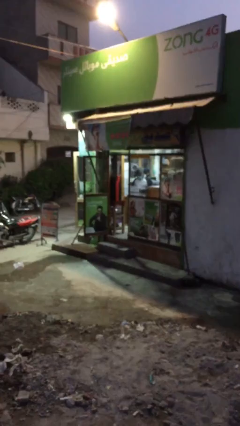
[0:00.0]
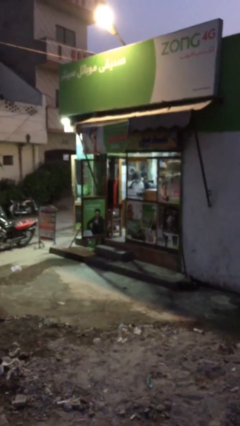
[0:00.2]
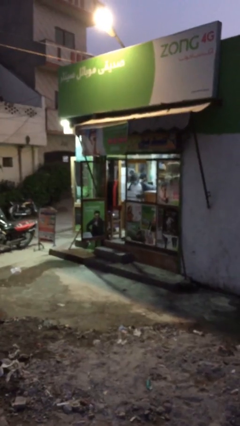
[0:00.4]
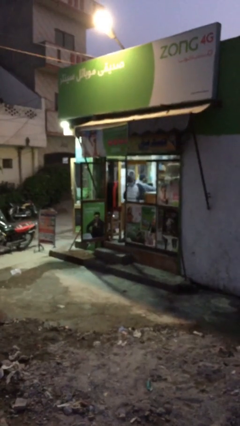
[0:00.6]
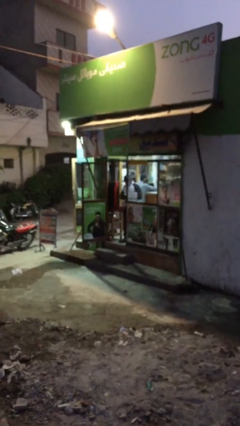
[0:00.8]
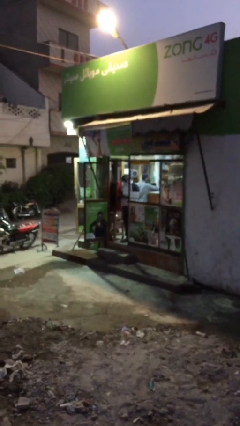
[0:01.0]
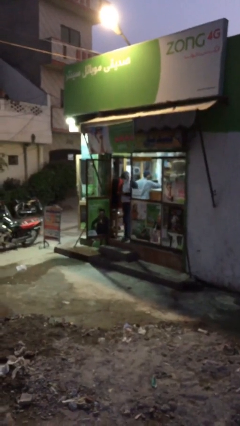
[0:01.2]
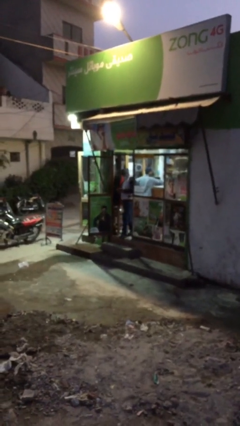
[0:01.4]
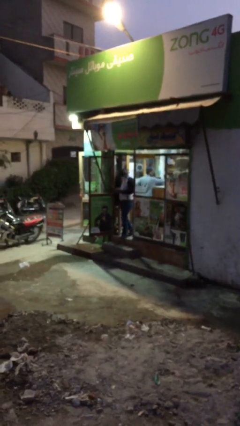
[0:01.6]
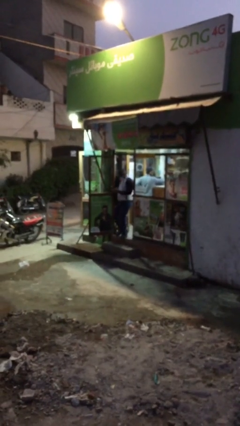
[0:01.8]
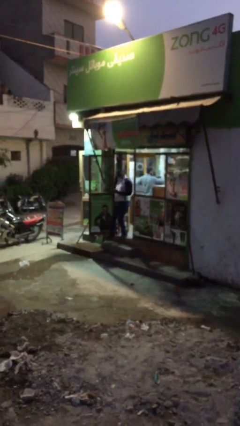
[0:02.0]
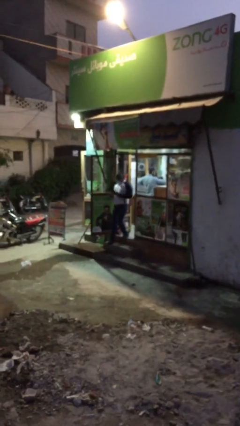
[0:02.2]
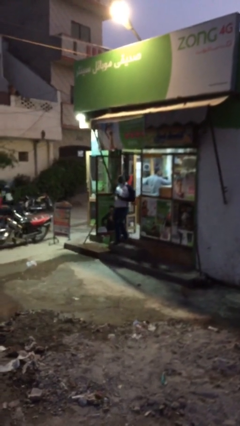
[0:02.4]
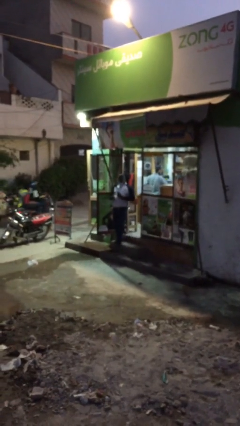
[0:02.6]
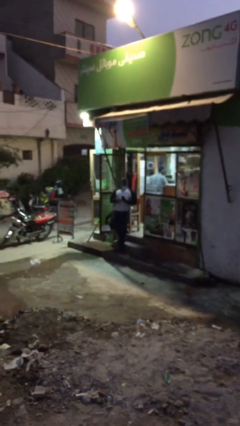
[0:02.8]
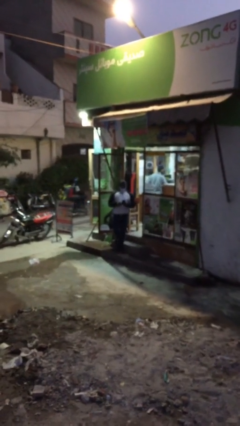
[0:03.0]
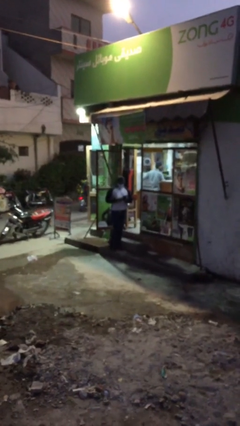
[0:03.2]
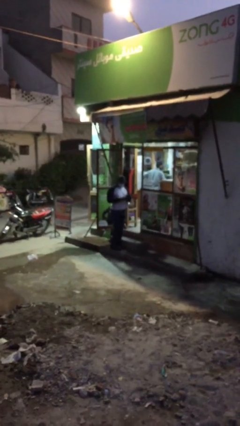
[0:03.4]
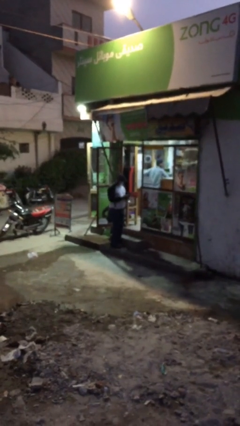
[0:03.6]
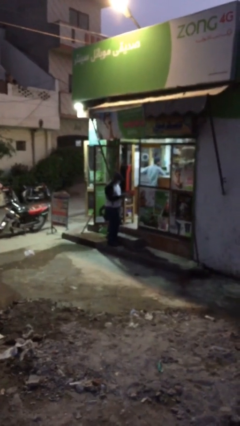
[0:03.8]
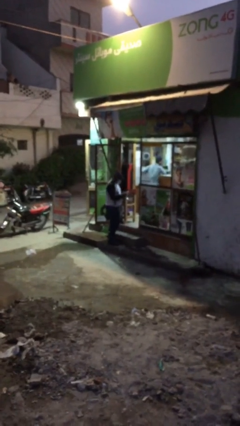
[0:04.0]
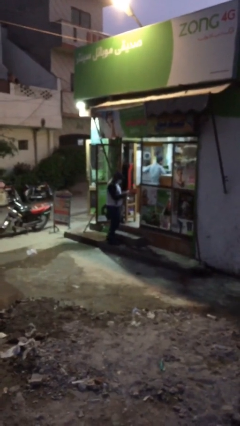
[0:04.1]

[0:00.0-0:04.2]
person exits scene through structure

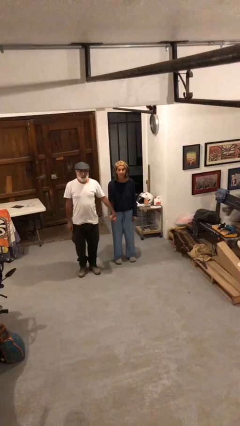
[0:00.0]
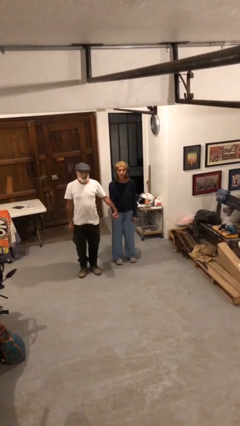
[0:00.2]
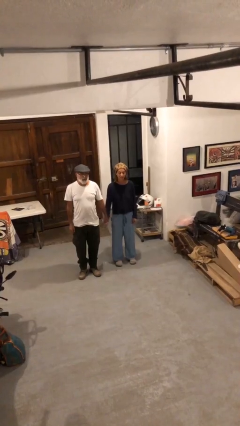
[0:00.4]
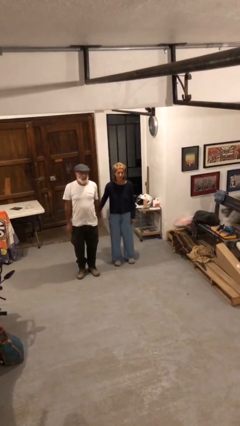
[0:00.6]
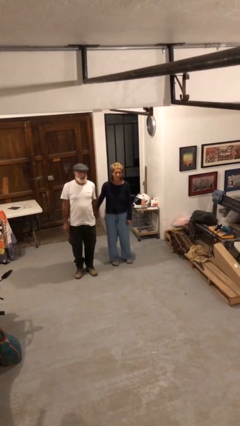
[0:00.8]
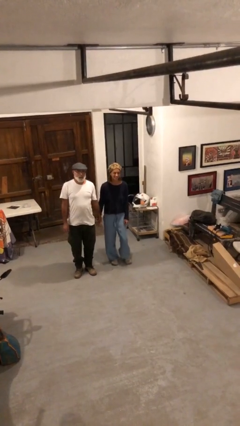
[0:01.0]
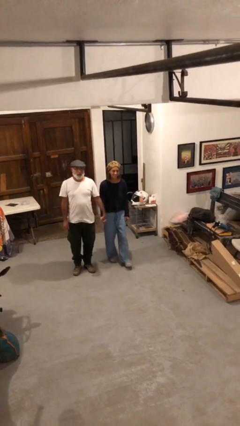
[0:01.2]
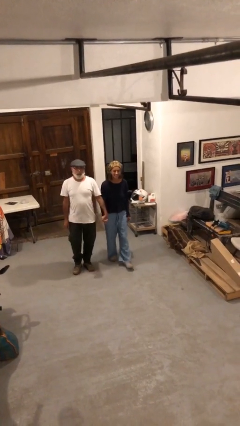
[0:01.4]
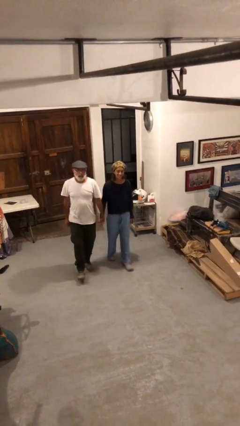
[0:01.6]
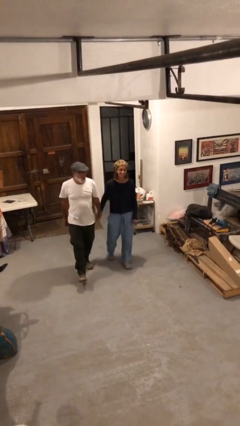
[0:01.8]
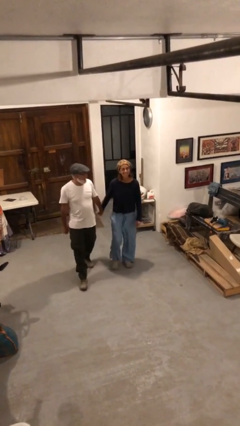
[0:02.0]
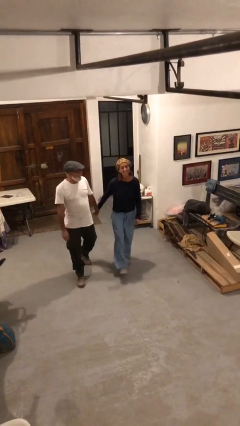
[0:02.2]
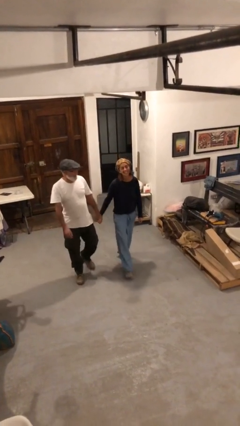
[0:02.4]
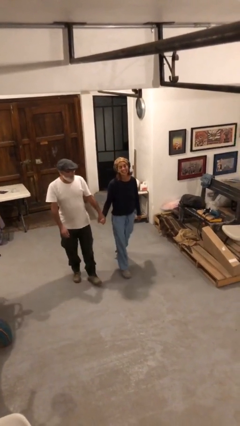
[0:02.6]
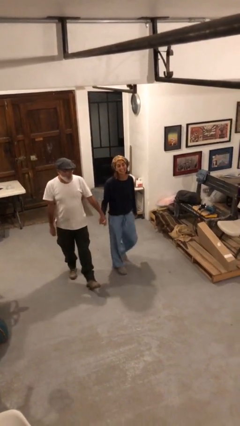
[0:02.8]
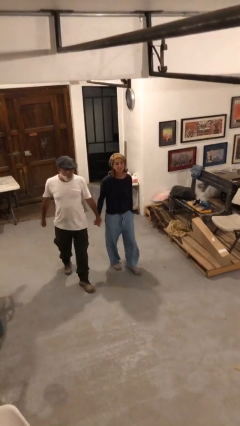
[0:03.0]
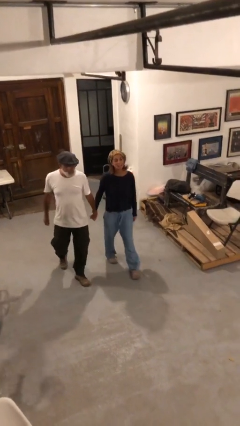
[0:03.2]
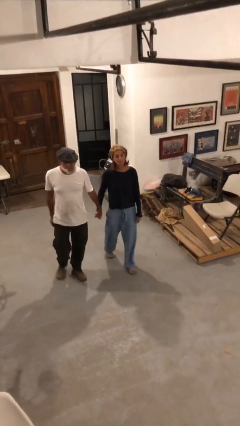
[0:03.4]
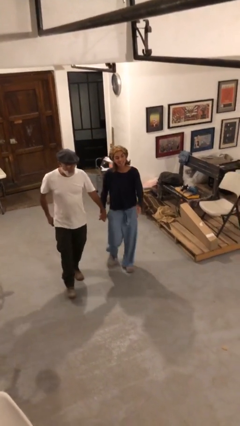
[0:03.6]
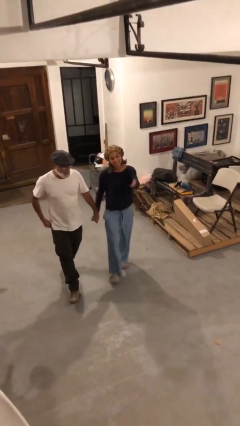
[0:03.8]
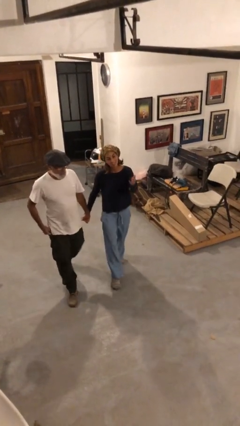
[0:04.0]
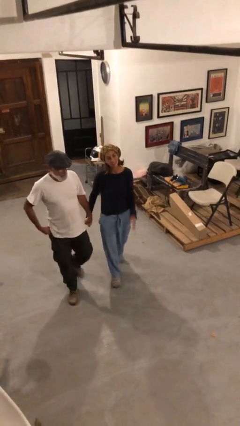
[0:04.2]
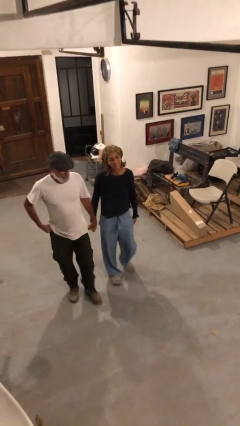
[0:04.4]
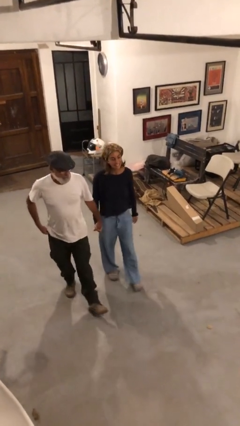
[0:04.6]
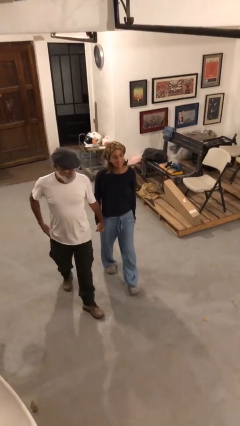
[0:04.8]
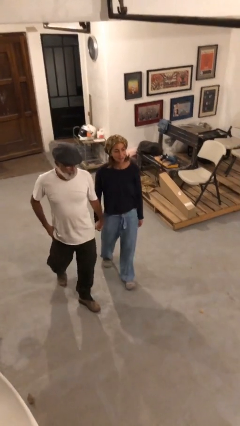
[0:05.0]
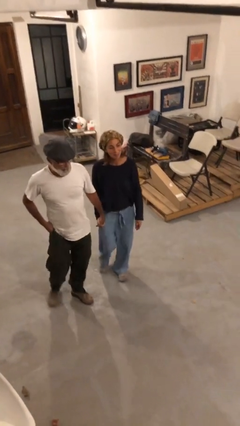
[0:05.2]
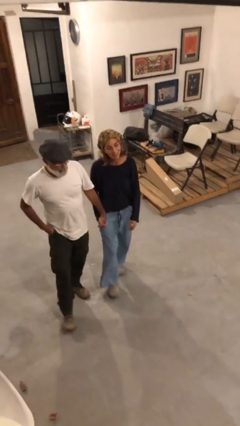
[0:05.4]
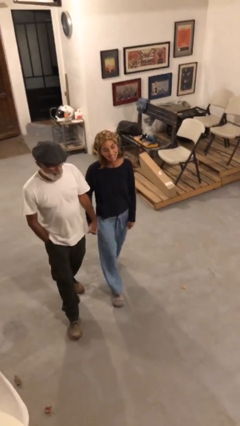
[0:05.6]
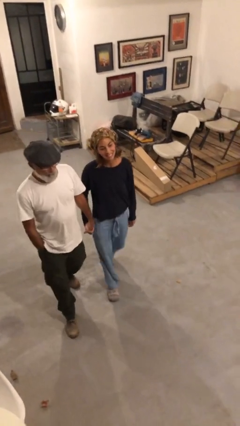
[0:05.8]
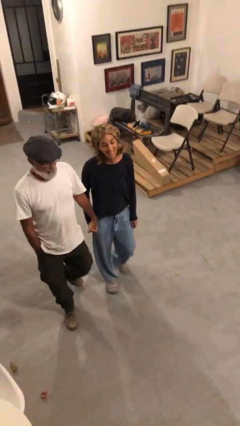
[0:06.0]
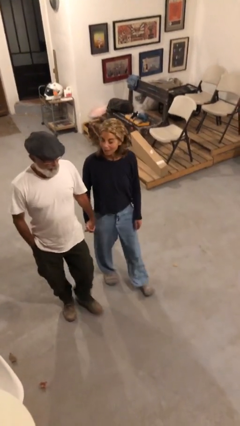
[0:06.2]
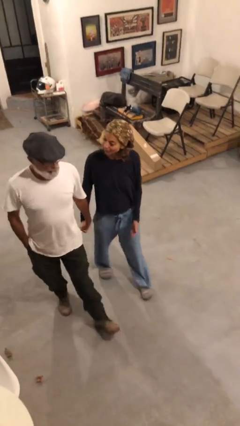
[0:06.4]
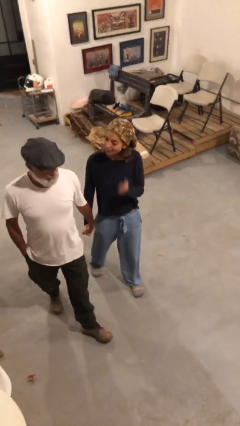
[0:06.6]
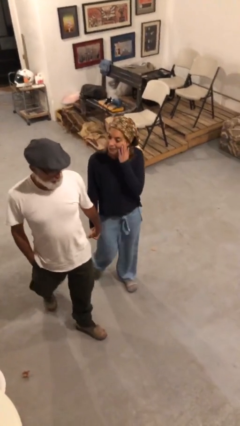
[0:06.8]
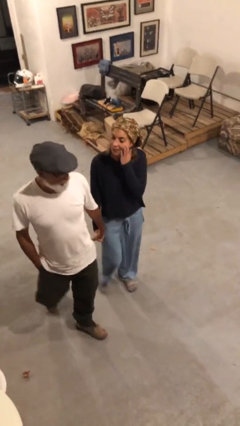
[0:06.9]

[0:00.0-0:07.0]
person holds hand

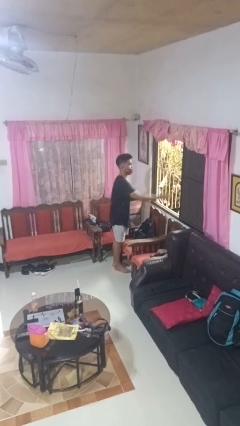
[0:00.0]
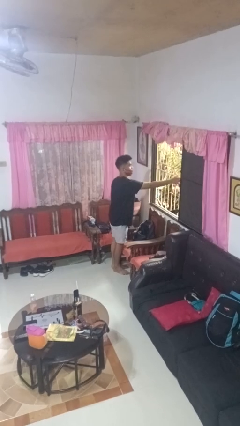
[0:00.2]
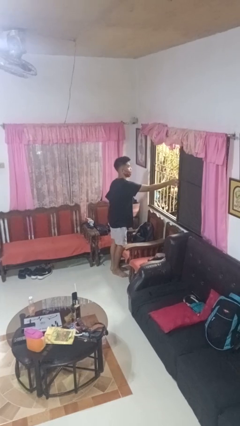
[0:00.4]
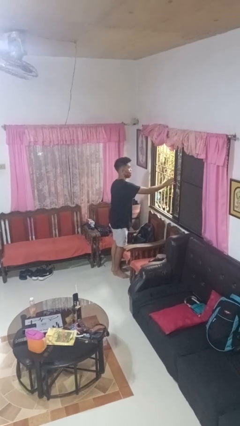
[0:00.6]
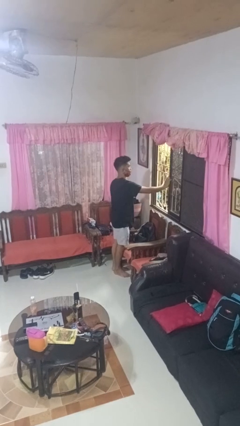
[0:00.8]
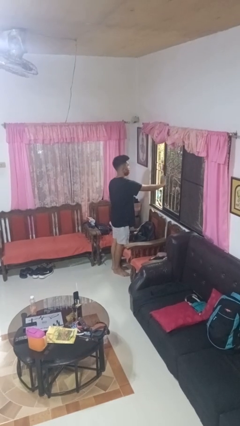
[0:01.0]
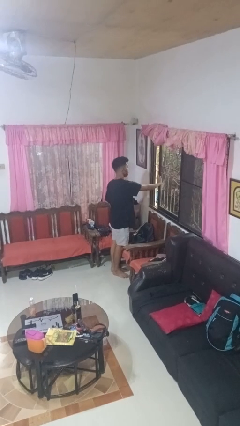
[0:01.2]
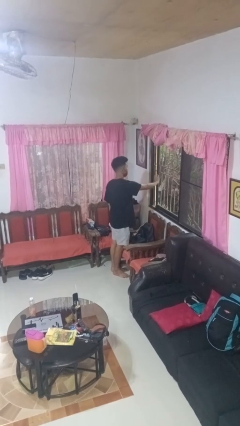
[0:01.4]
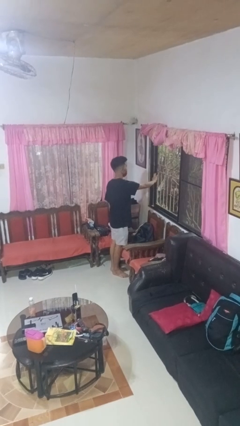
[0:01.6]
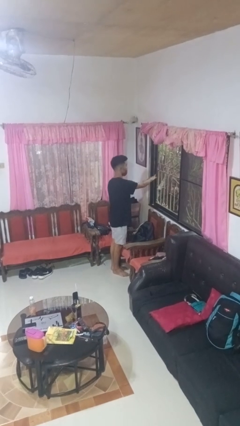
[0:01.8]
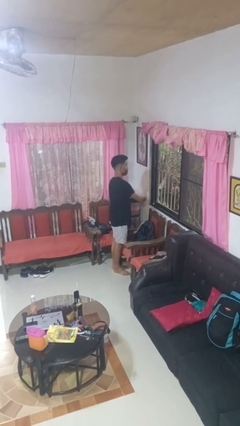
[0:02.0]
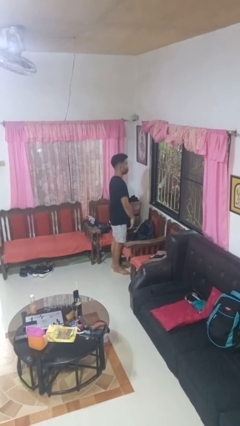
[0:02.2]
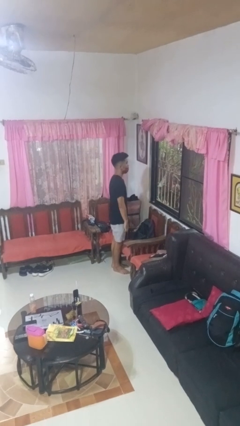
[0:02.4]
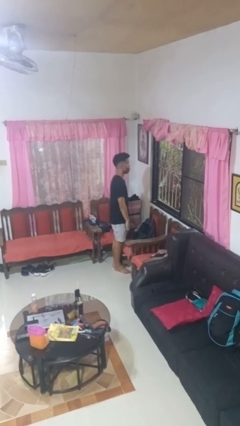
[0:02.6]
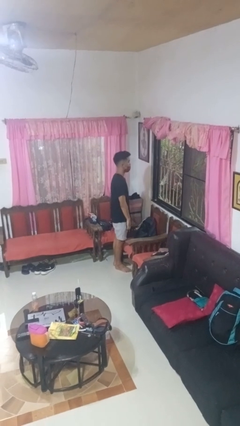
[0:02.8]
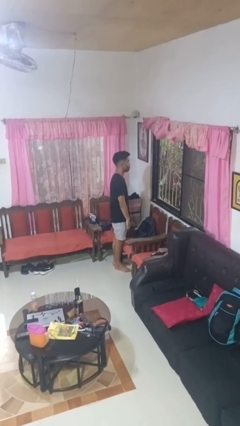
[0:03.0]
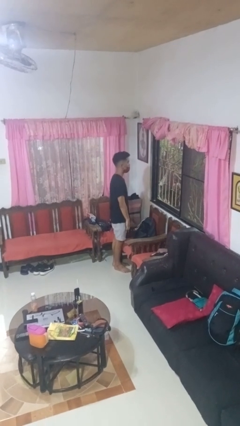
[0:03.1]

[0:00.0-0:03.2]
person closes home window

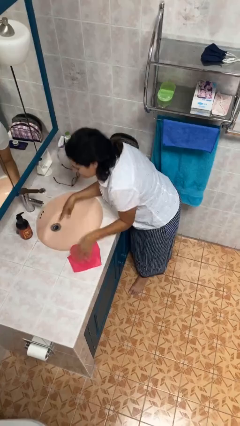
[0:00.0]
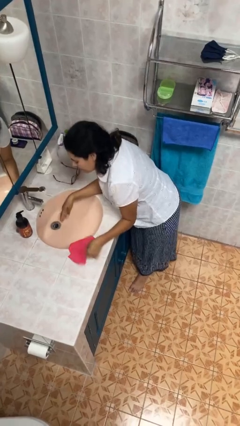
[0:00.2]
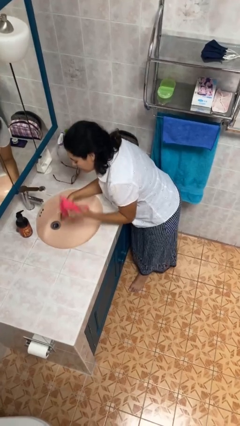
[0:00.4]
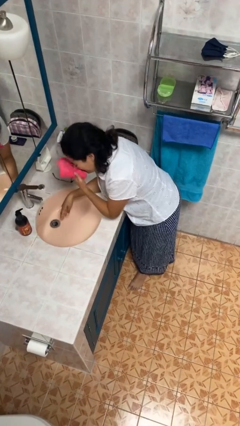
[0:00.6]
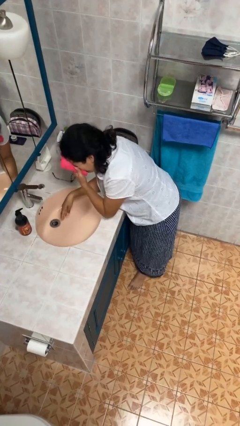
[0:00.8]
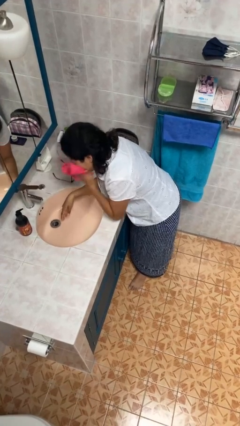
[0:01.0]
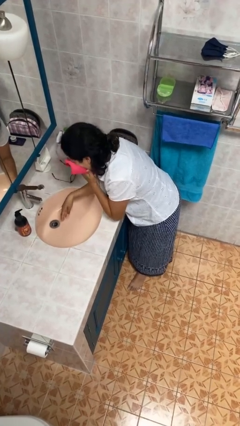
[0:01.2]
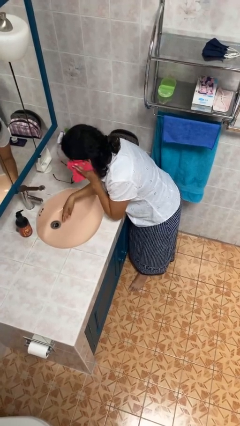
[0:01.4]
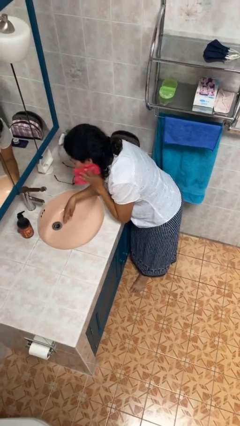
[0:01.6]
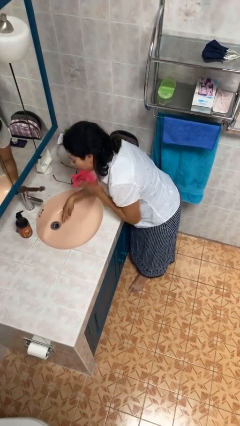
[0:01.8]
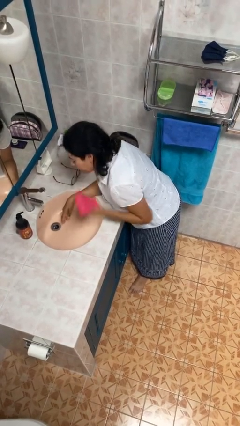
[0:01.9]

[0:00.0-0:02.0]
person dries face with towel

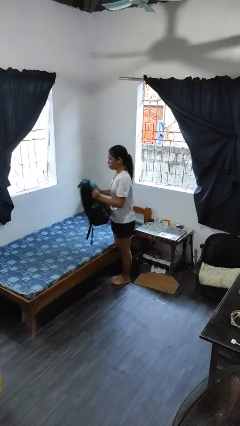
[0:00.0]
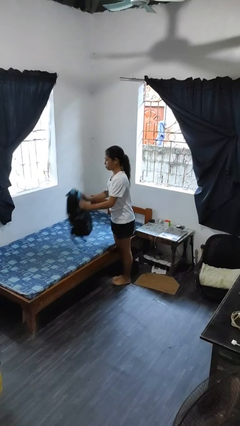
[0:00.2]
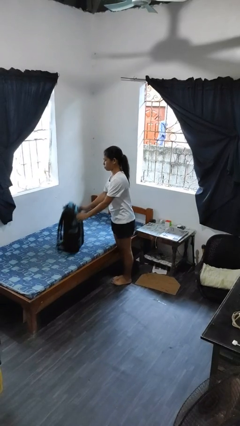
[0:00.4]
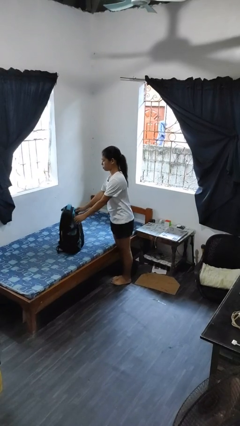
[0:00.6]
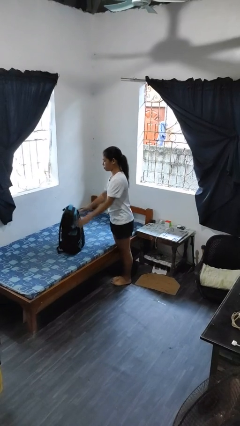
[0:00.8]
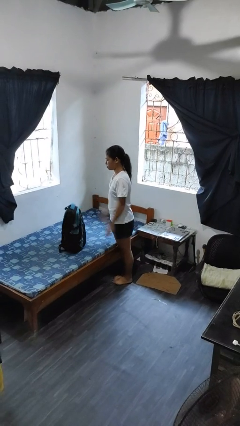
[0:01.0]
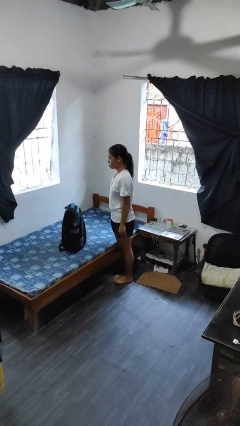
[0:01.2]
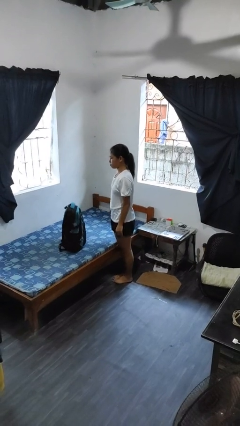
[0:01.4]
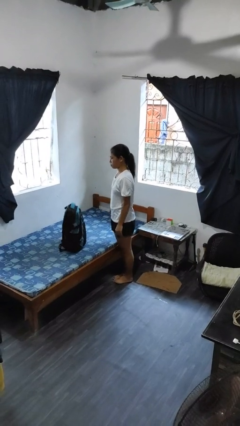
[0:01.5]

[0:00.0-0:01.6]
person puts down object on bed
